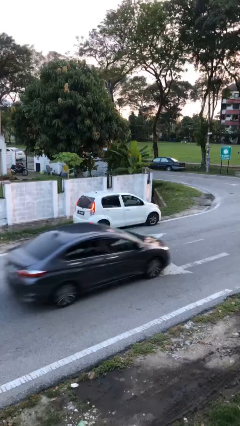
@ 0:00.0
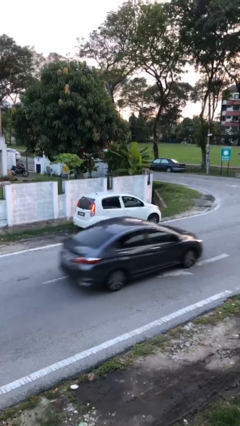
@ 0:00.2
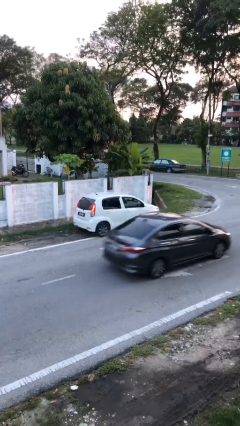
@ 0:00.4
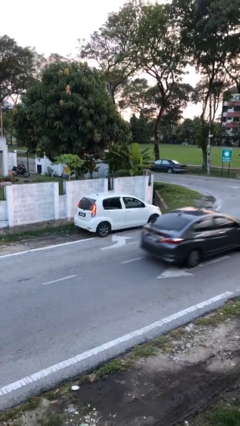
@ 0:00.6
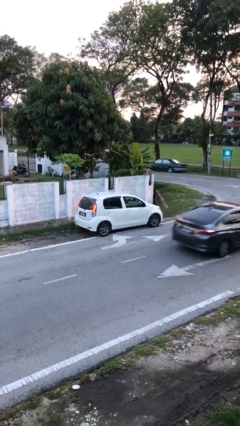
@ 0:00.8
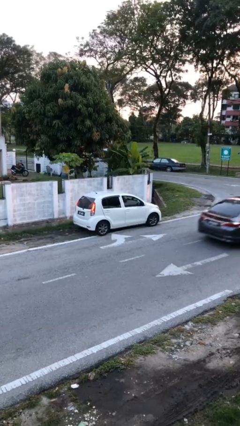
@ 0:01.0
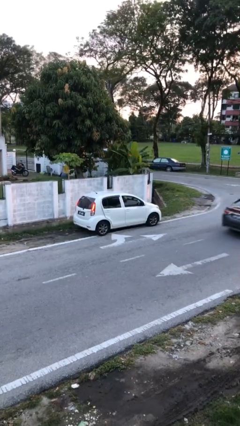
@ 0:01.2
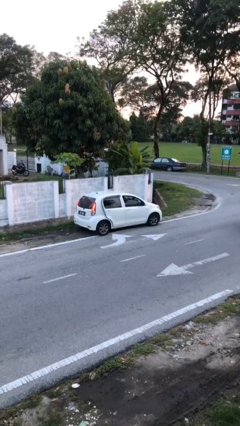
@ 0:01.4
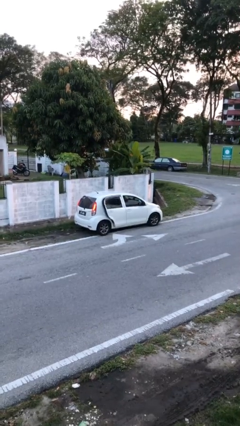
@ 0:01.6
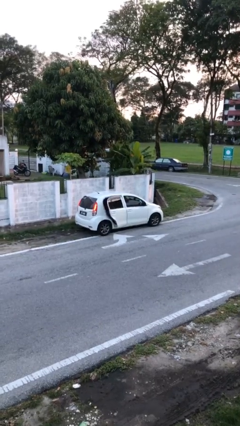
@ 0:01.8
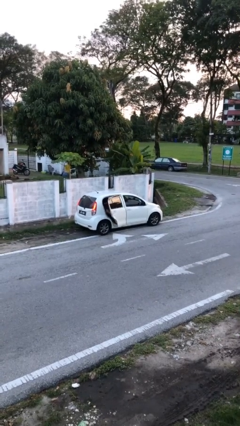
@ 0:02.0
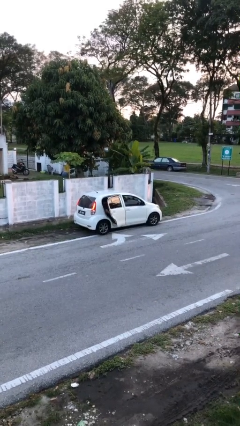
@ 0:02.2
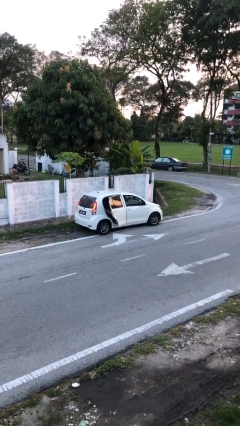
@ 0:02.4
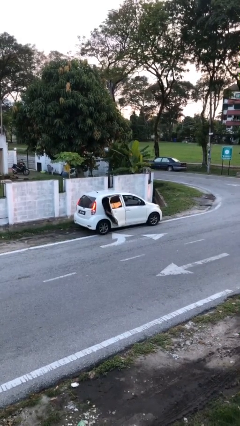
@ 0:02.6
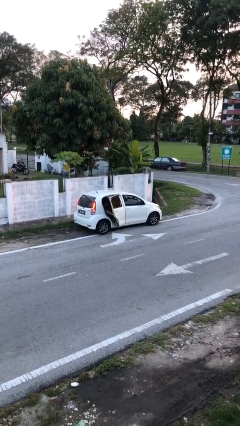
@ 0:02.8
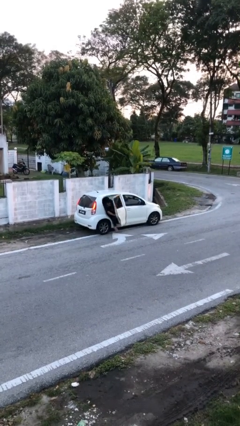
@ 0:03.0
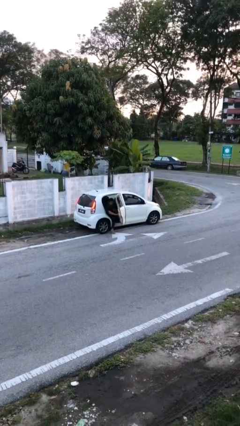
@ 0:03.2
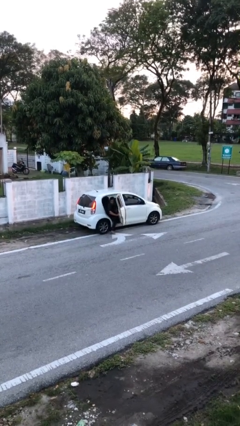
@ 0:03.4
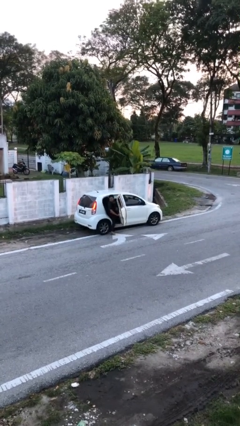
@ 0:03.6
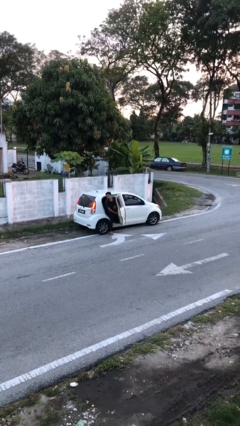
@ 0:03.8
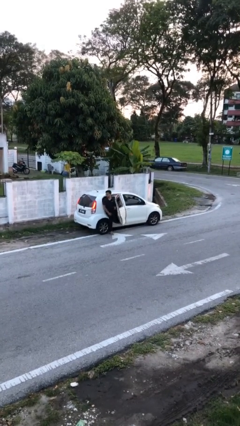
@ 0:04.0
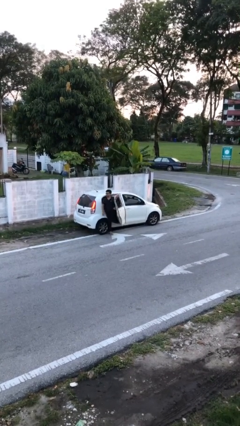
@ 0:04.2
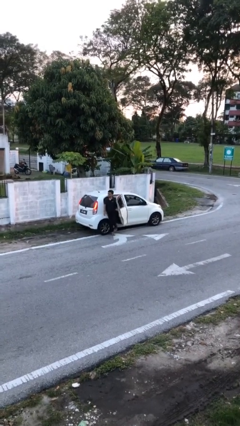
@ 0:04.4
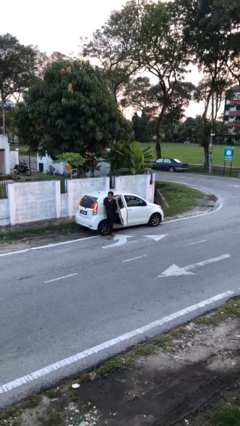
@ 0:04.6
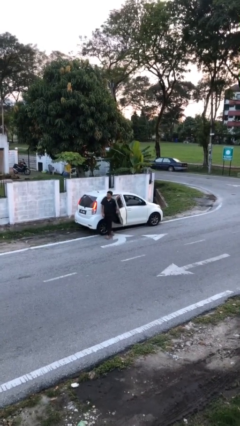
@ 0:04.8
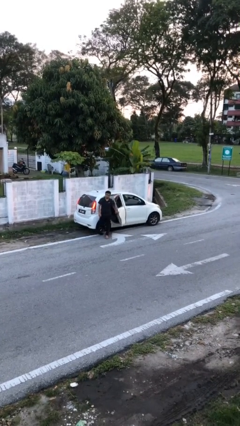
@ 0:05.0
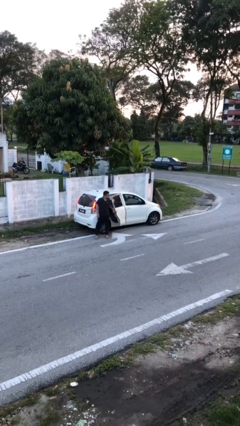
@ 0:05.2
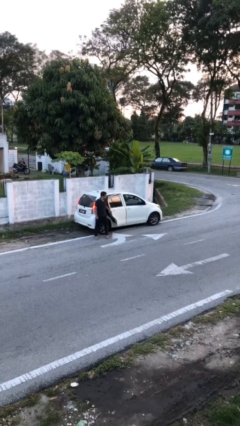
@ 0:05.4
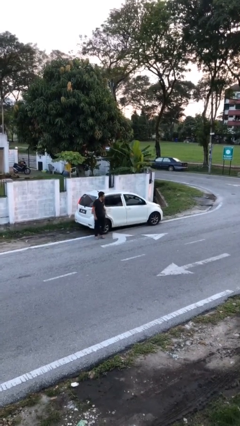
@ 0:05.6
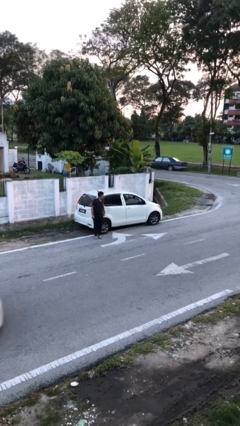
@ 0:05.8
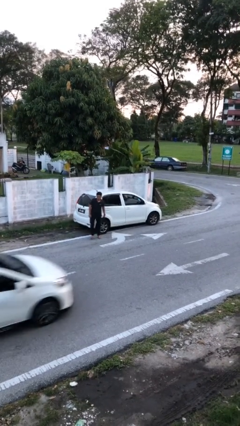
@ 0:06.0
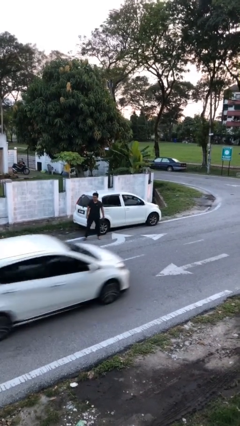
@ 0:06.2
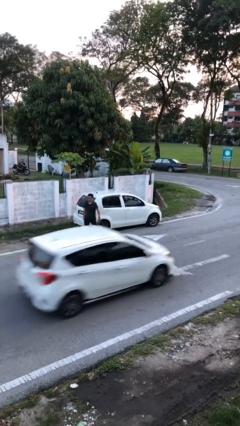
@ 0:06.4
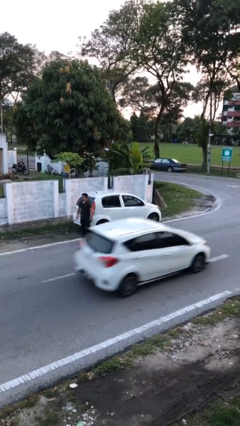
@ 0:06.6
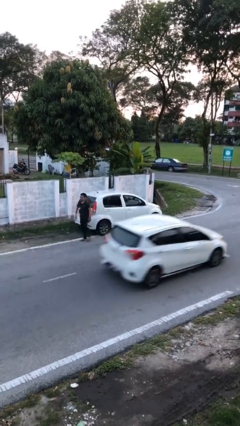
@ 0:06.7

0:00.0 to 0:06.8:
car drops off person

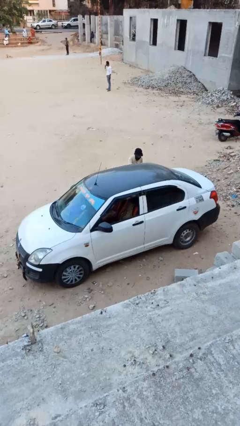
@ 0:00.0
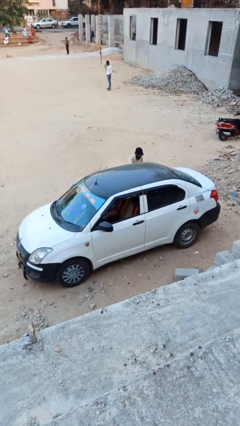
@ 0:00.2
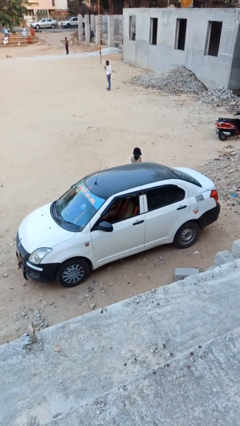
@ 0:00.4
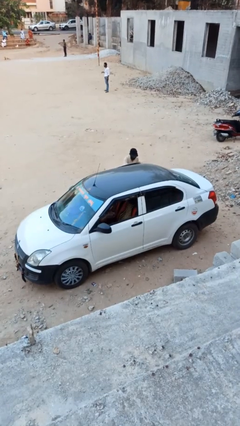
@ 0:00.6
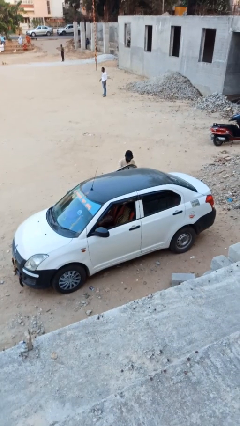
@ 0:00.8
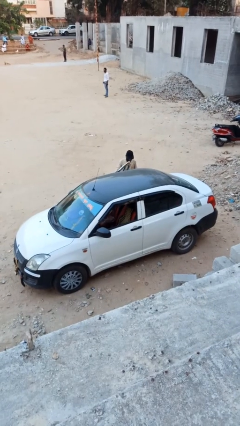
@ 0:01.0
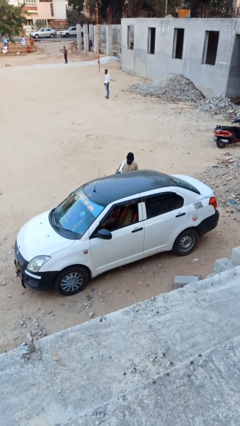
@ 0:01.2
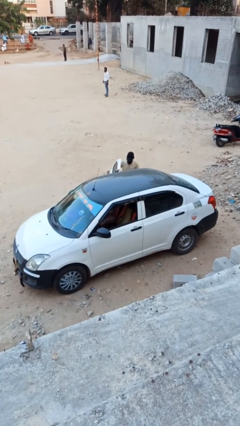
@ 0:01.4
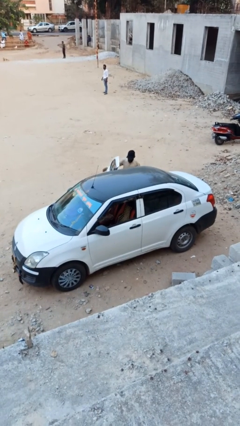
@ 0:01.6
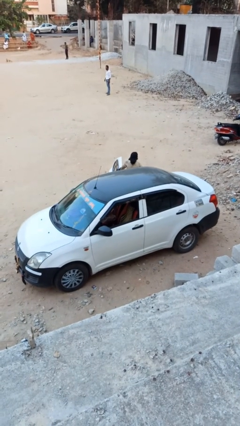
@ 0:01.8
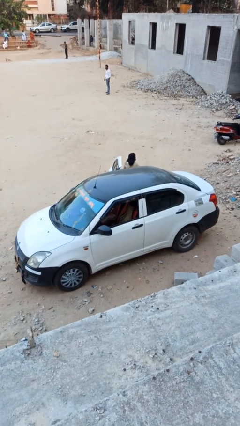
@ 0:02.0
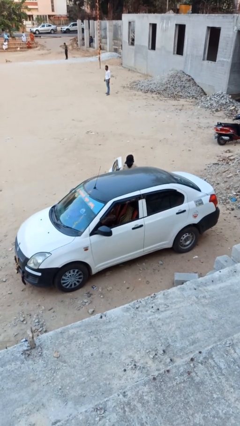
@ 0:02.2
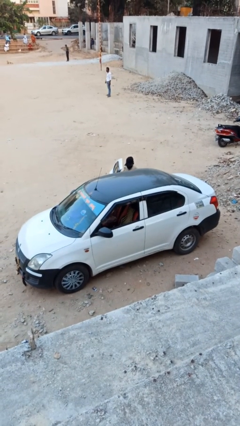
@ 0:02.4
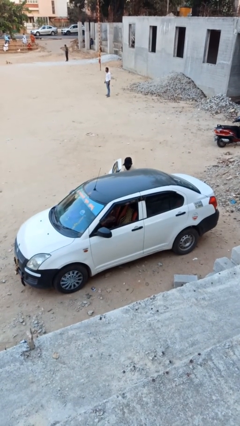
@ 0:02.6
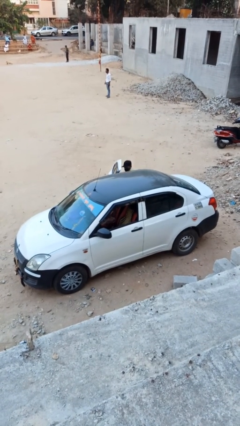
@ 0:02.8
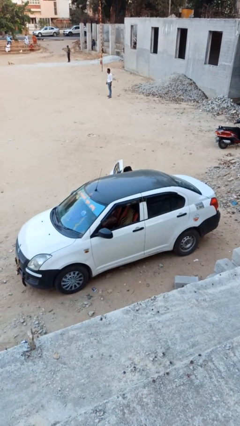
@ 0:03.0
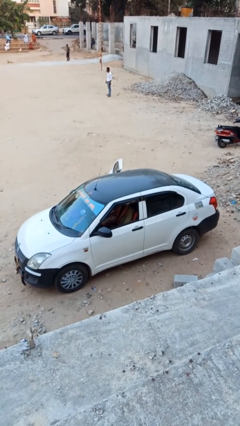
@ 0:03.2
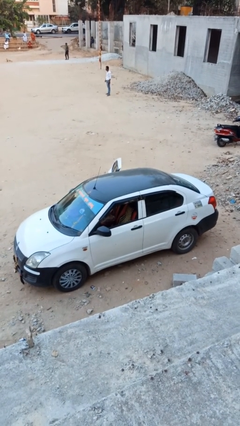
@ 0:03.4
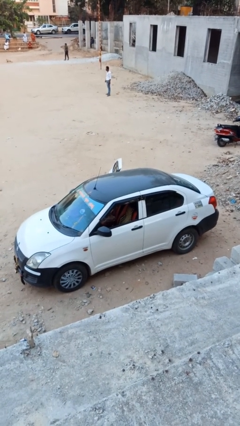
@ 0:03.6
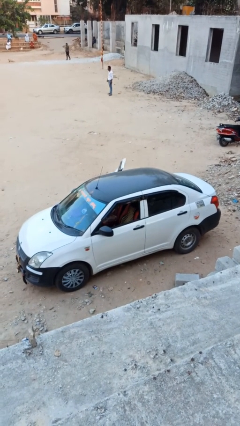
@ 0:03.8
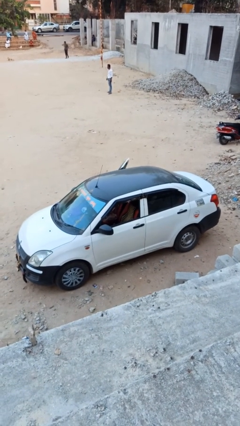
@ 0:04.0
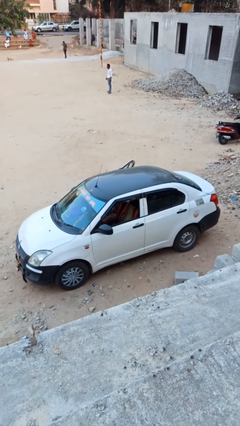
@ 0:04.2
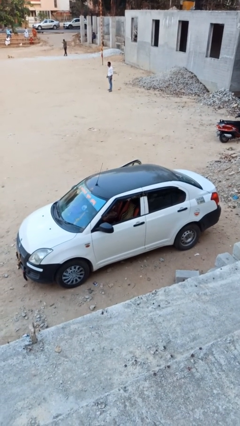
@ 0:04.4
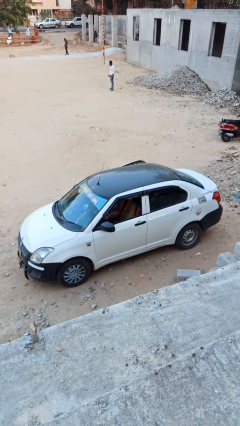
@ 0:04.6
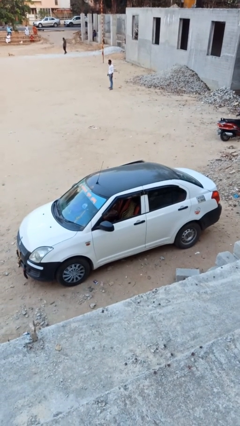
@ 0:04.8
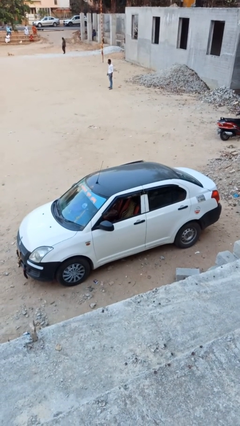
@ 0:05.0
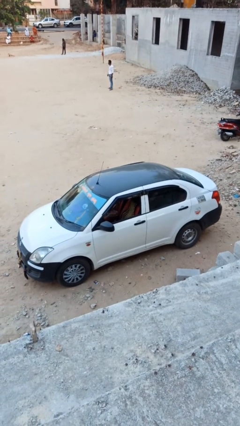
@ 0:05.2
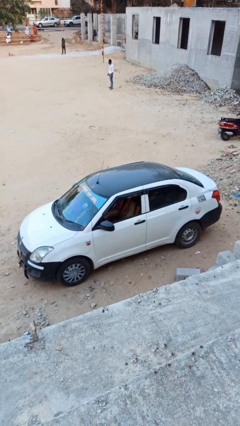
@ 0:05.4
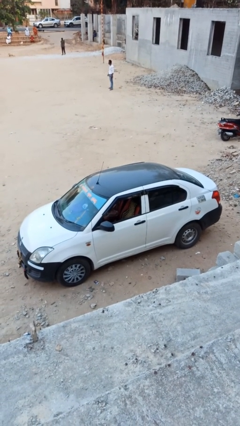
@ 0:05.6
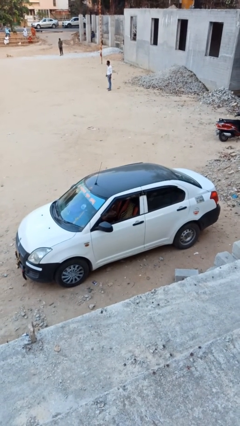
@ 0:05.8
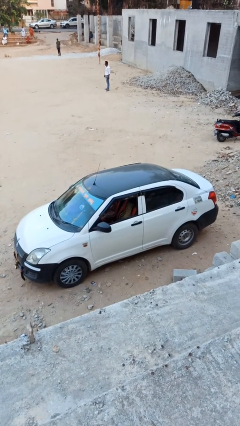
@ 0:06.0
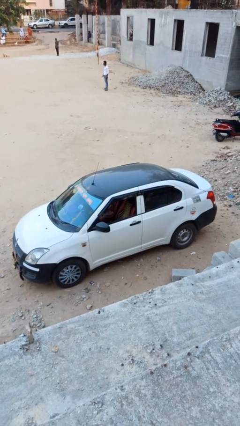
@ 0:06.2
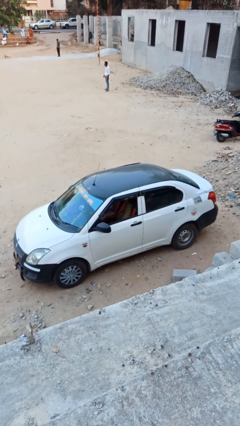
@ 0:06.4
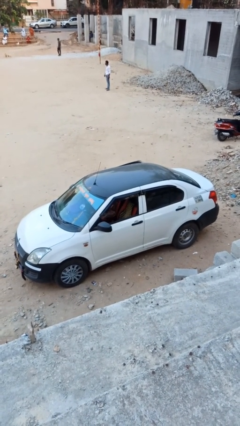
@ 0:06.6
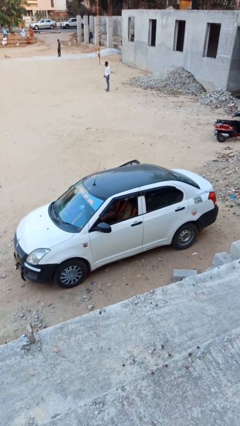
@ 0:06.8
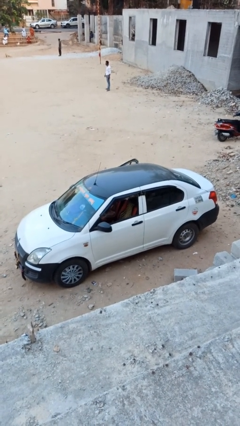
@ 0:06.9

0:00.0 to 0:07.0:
car picks up person

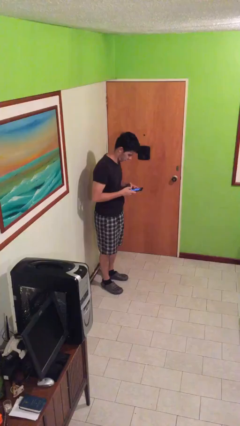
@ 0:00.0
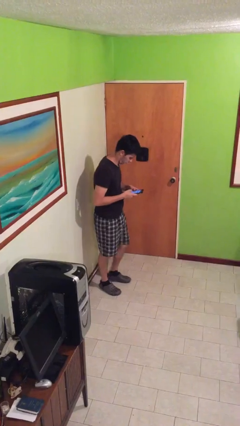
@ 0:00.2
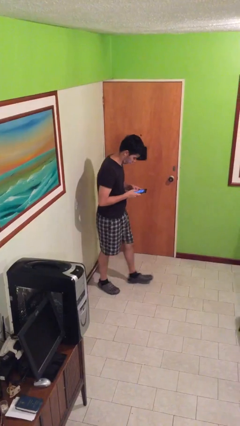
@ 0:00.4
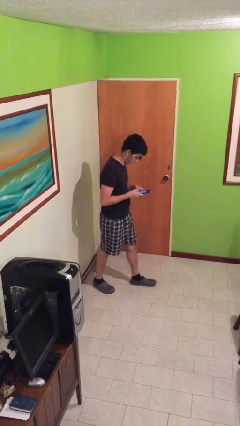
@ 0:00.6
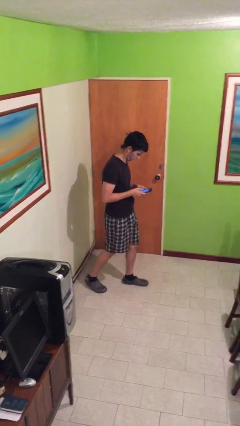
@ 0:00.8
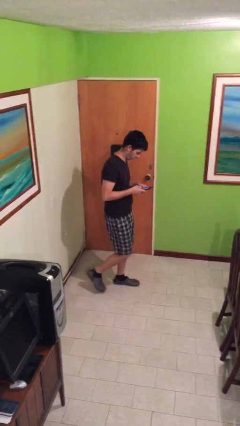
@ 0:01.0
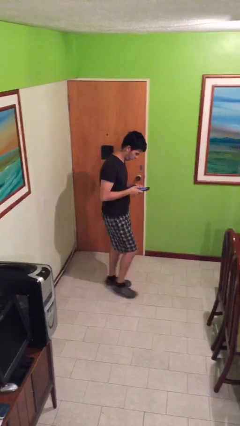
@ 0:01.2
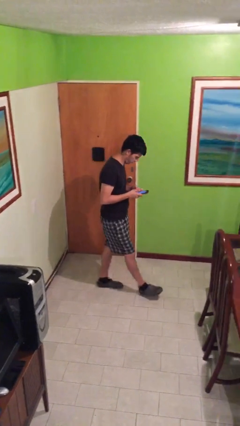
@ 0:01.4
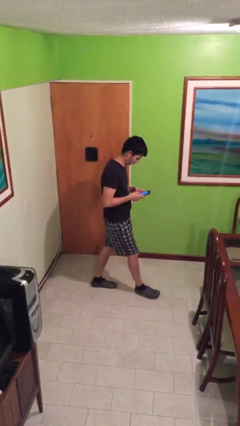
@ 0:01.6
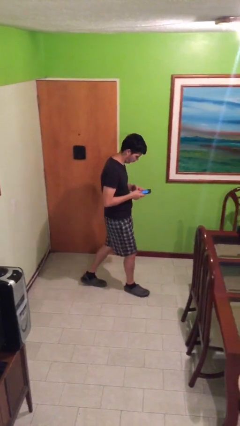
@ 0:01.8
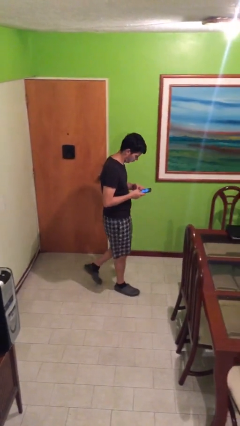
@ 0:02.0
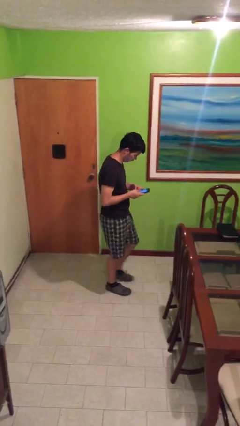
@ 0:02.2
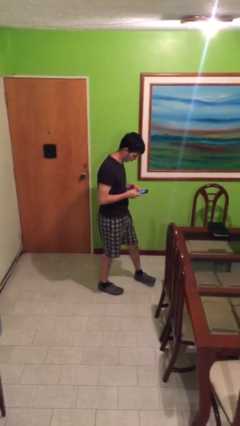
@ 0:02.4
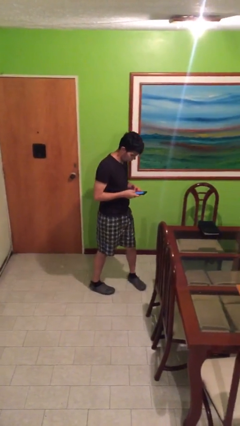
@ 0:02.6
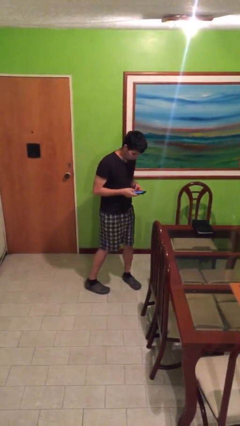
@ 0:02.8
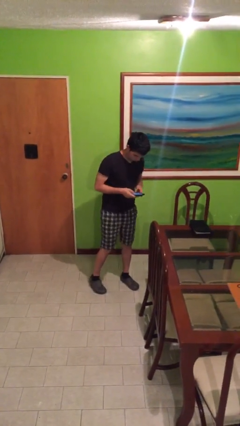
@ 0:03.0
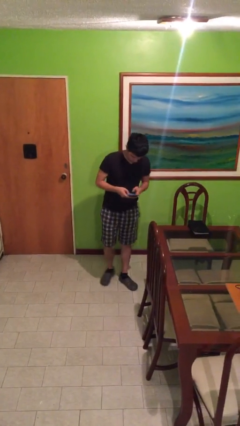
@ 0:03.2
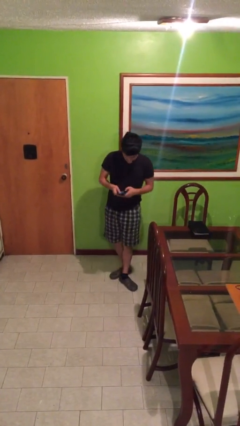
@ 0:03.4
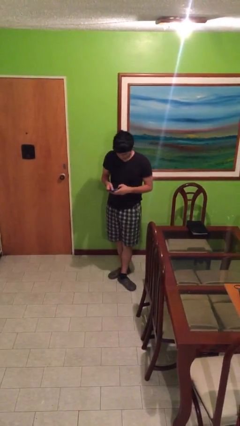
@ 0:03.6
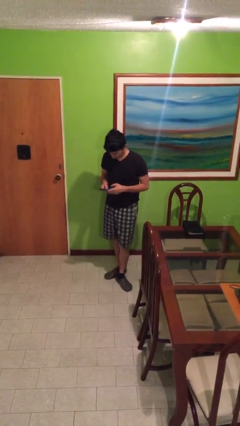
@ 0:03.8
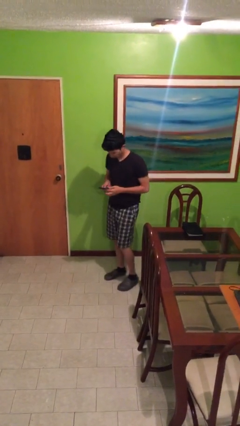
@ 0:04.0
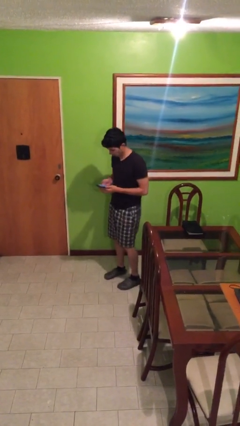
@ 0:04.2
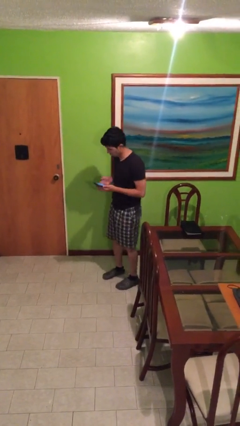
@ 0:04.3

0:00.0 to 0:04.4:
person texts on phone
